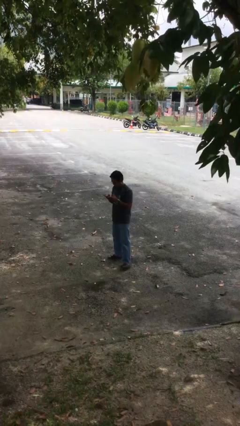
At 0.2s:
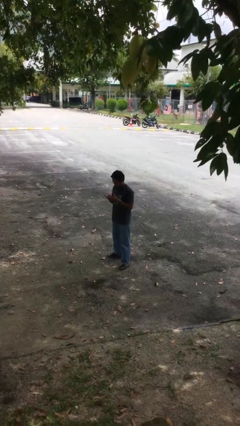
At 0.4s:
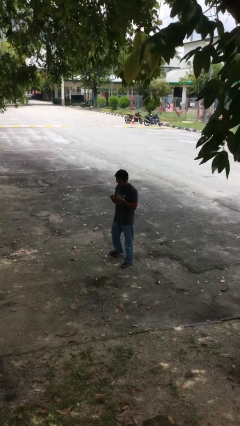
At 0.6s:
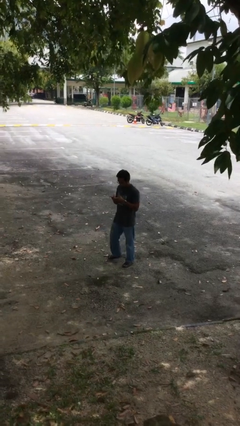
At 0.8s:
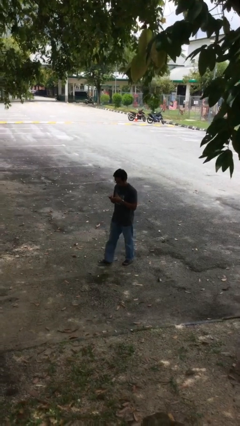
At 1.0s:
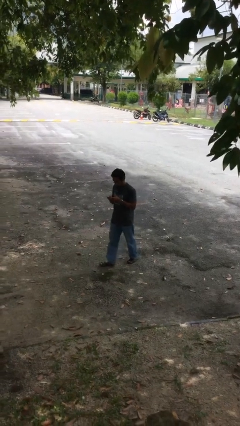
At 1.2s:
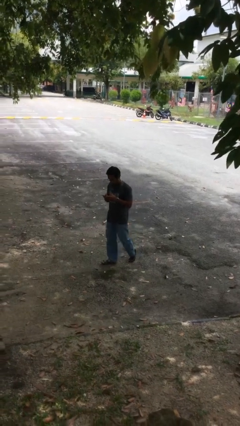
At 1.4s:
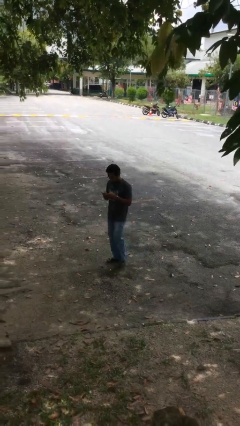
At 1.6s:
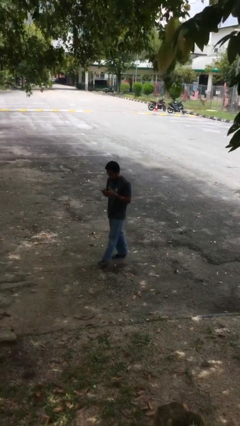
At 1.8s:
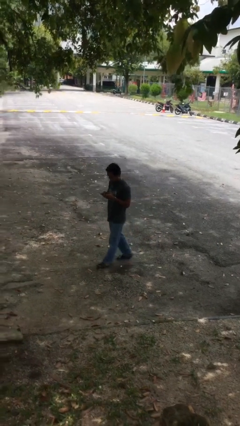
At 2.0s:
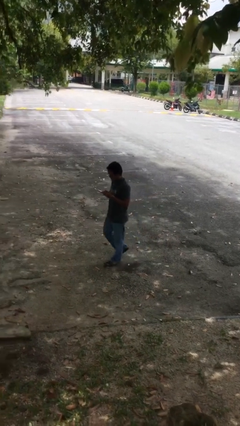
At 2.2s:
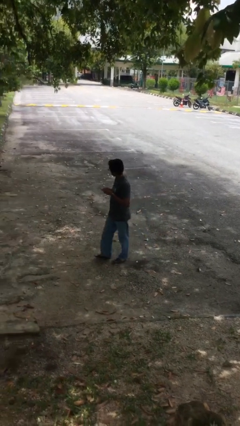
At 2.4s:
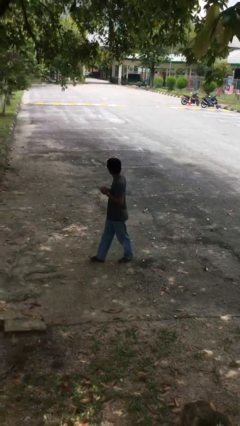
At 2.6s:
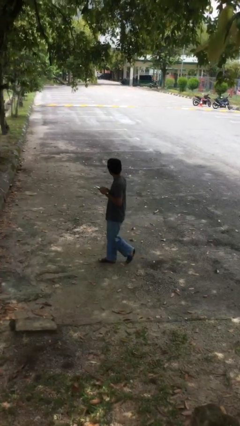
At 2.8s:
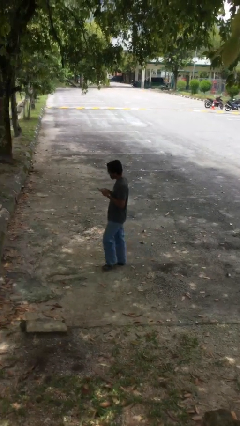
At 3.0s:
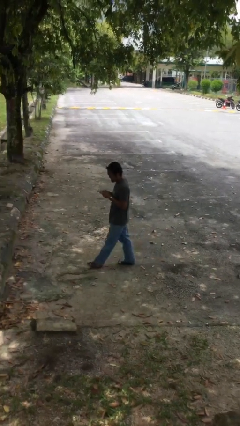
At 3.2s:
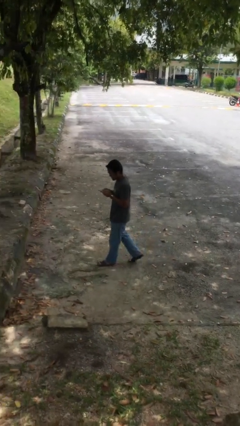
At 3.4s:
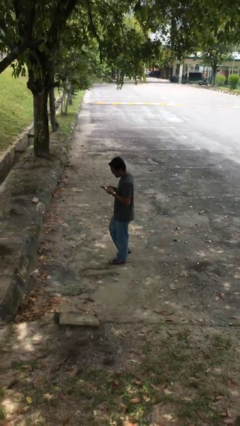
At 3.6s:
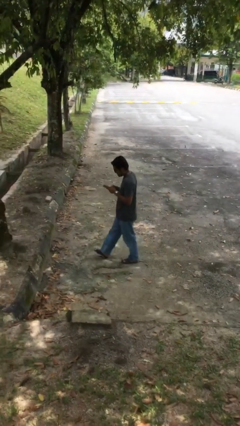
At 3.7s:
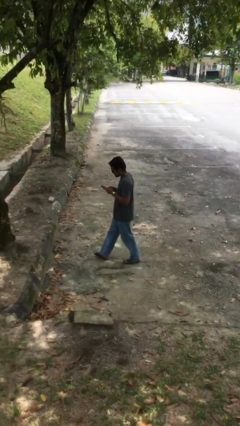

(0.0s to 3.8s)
person texts on phone

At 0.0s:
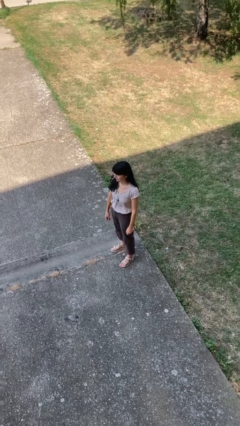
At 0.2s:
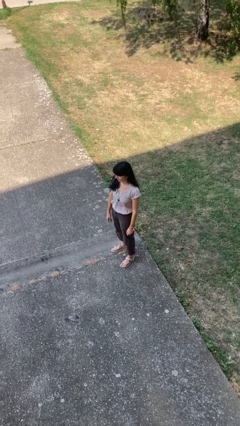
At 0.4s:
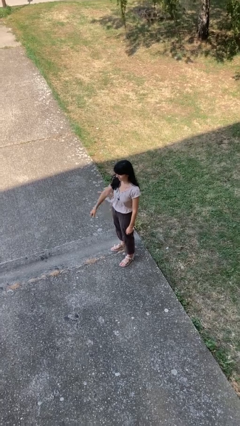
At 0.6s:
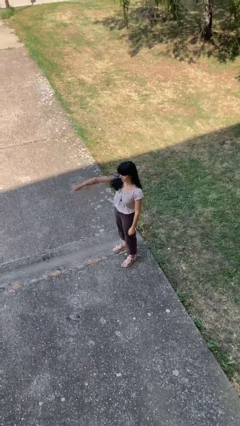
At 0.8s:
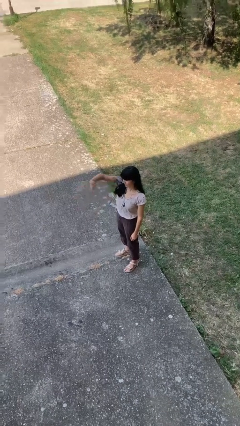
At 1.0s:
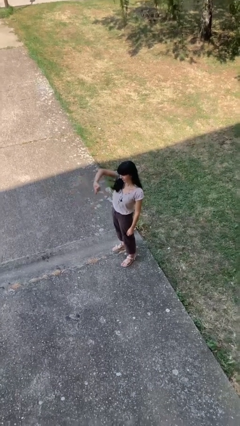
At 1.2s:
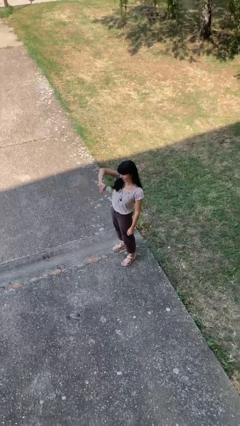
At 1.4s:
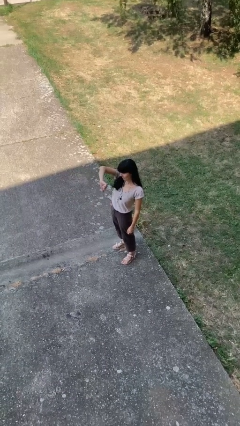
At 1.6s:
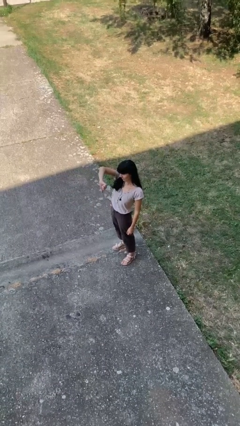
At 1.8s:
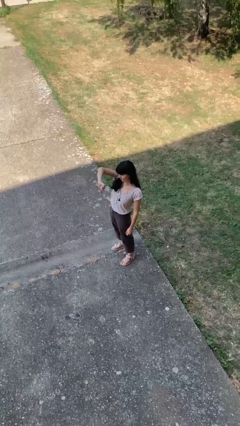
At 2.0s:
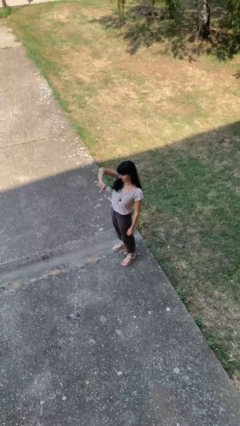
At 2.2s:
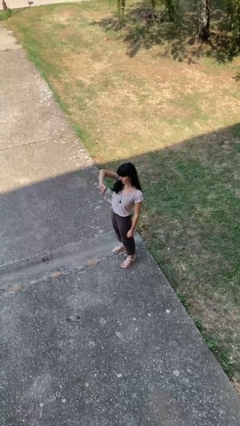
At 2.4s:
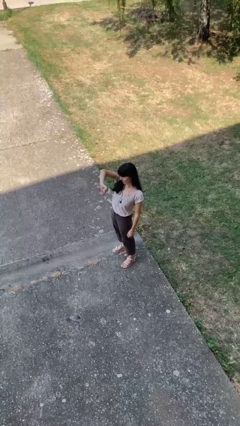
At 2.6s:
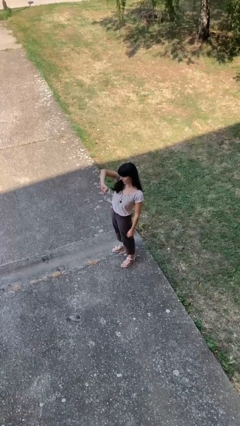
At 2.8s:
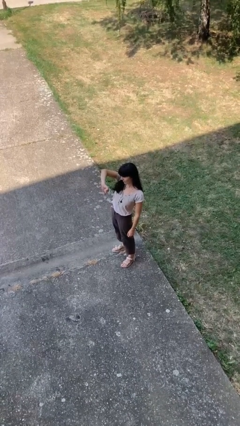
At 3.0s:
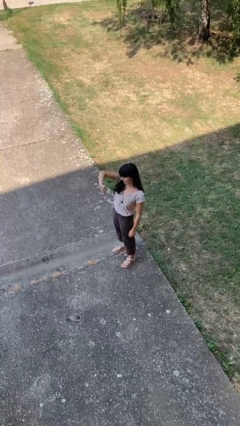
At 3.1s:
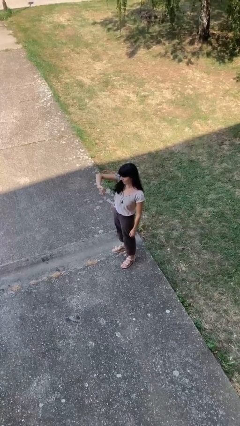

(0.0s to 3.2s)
person gestures thumbs down

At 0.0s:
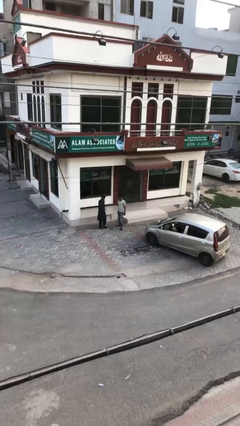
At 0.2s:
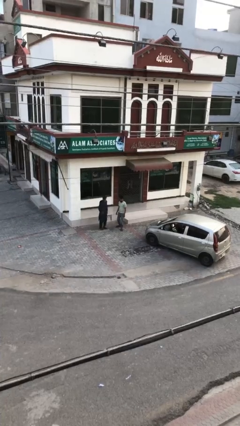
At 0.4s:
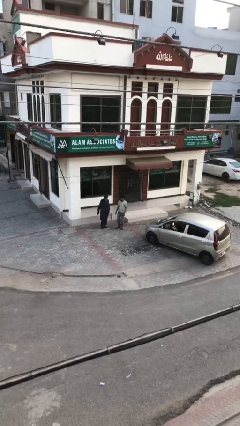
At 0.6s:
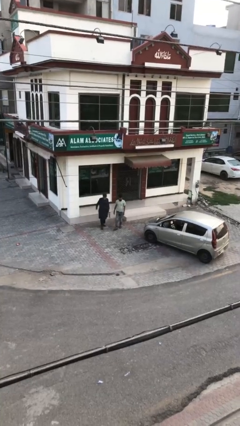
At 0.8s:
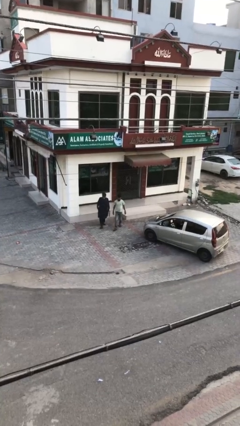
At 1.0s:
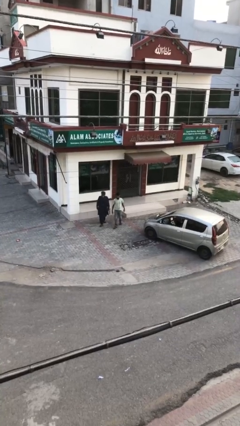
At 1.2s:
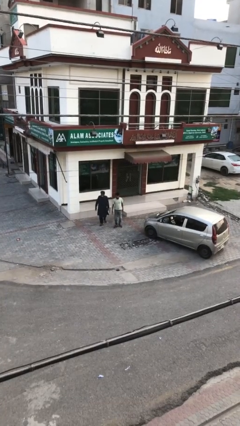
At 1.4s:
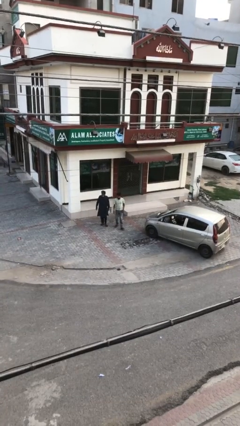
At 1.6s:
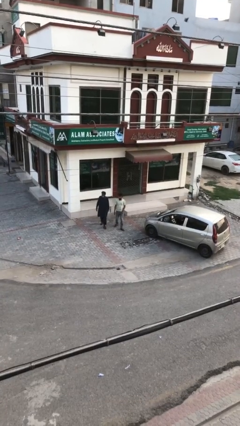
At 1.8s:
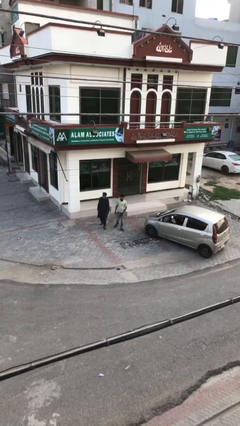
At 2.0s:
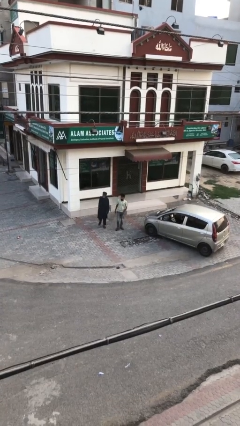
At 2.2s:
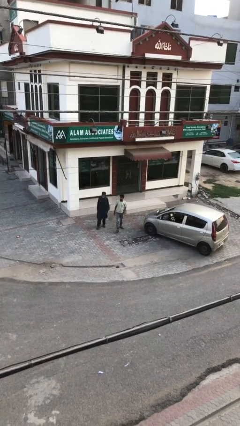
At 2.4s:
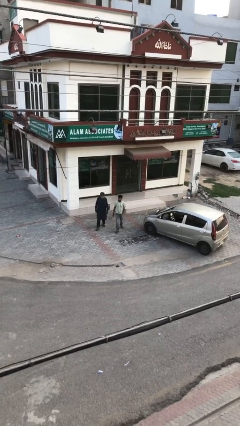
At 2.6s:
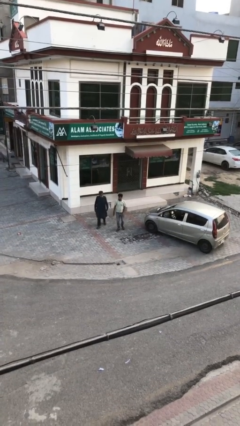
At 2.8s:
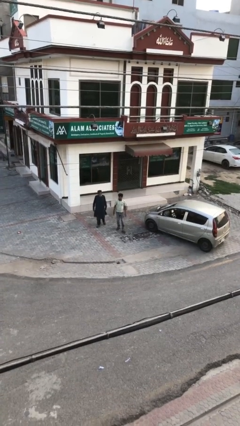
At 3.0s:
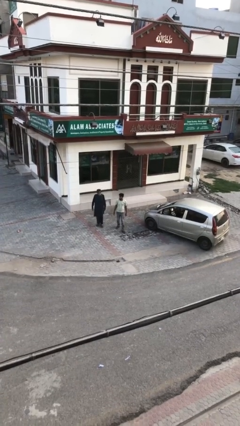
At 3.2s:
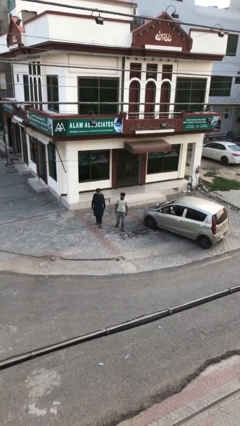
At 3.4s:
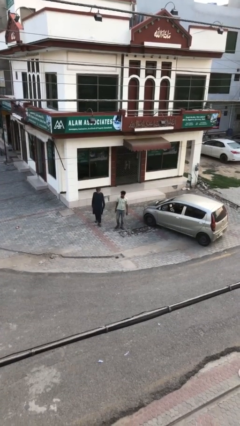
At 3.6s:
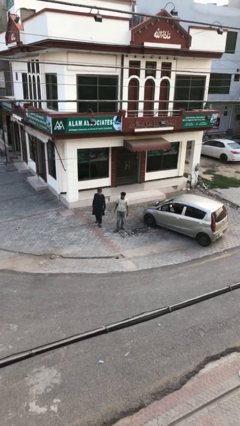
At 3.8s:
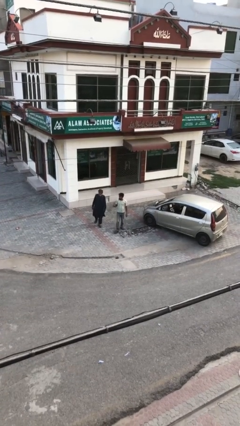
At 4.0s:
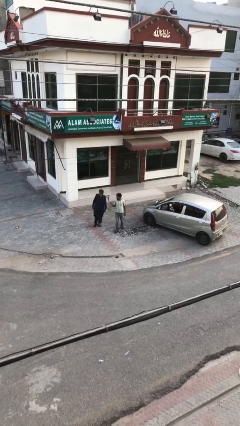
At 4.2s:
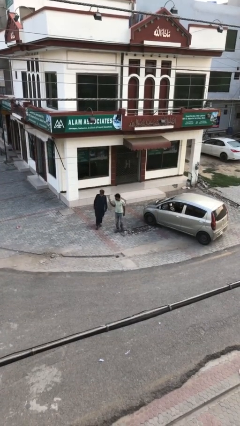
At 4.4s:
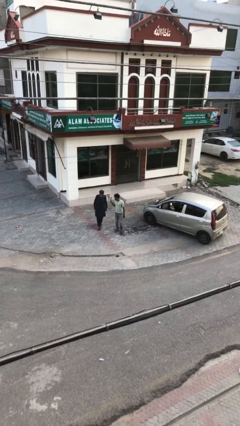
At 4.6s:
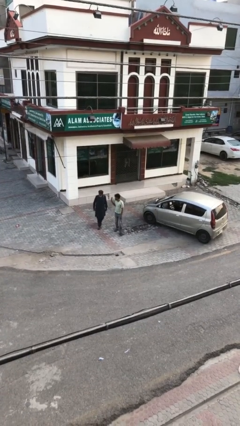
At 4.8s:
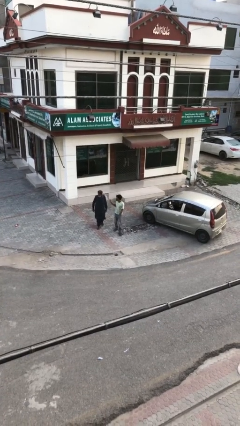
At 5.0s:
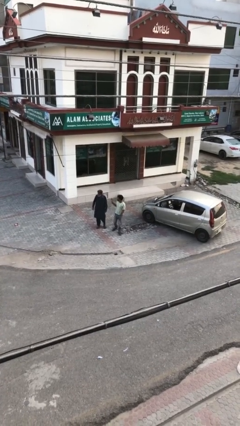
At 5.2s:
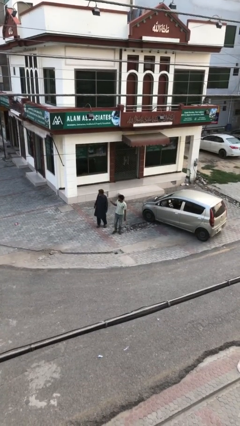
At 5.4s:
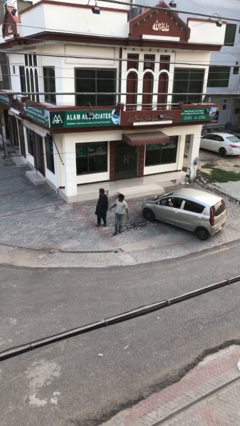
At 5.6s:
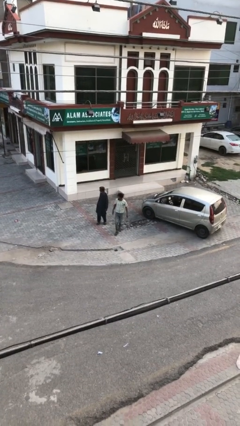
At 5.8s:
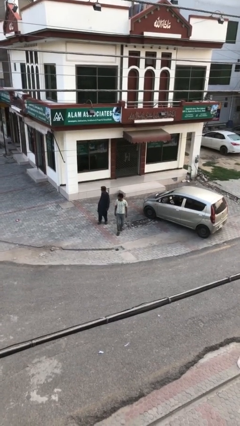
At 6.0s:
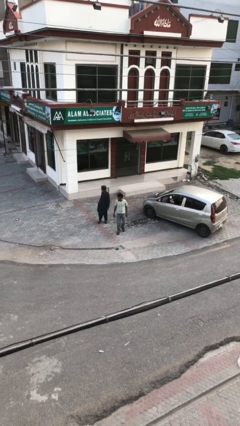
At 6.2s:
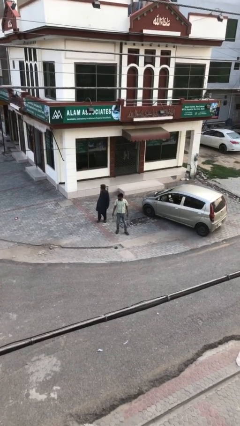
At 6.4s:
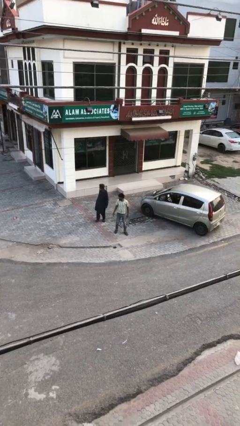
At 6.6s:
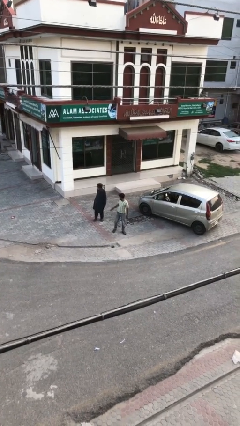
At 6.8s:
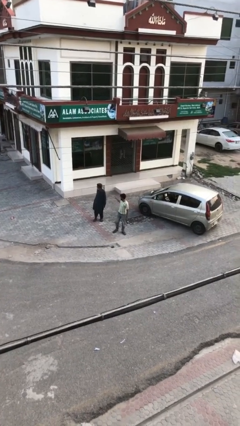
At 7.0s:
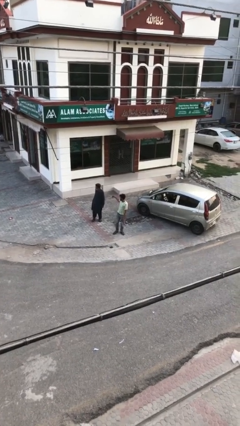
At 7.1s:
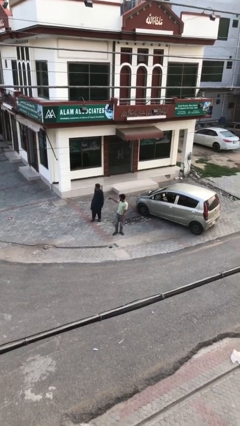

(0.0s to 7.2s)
person talks to person

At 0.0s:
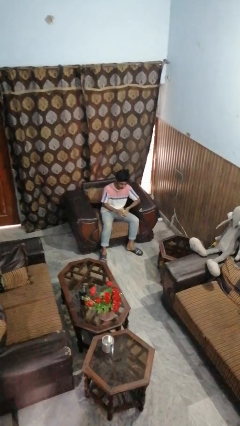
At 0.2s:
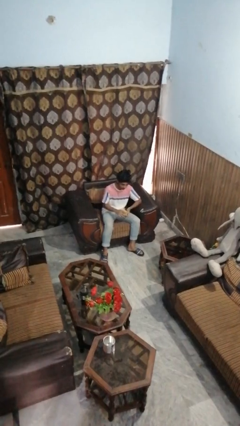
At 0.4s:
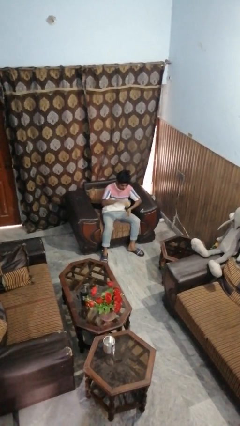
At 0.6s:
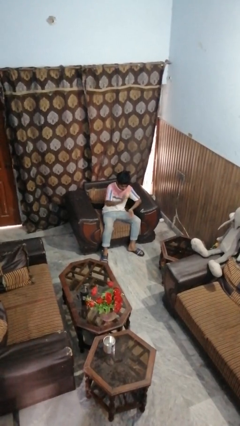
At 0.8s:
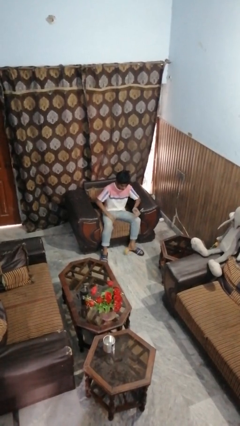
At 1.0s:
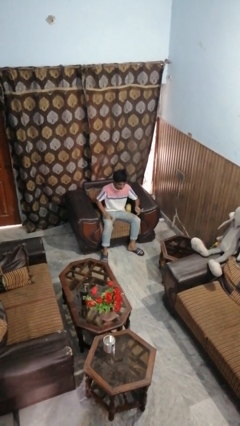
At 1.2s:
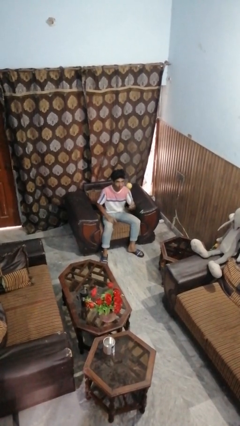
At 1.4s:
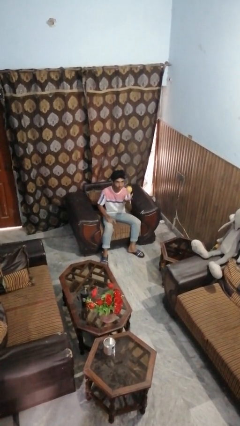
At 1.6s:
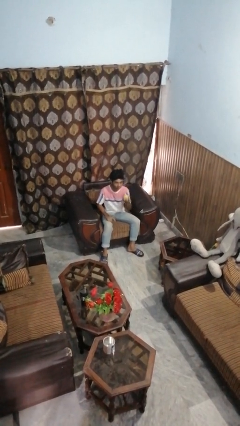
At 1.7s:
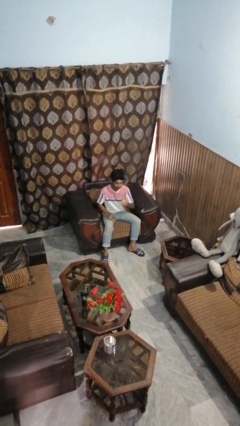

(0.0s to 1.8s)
person bounces ball on floor

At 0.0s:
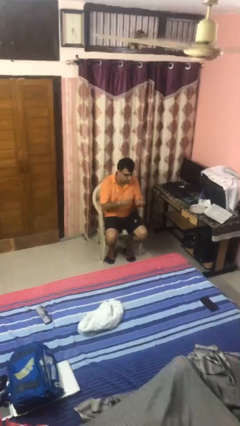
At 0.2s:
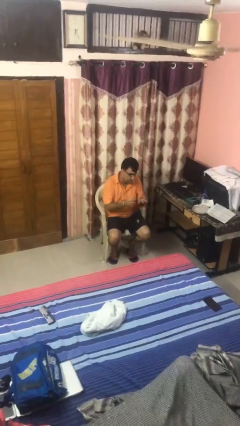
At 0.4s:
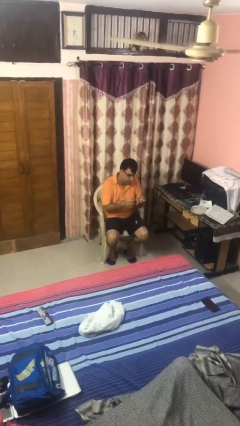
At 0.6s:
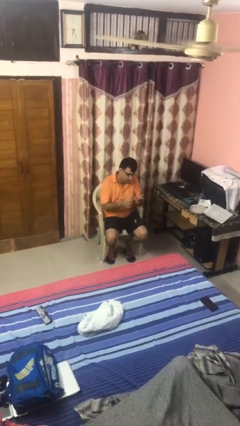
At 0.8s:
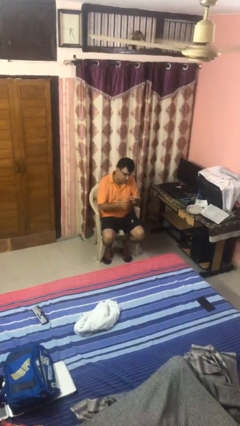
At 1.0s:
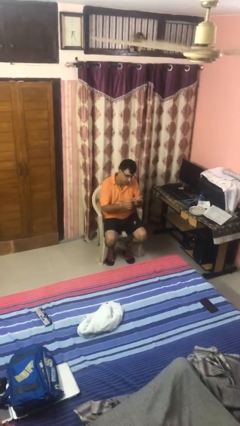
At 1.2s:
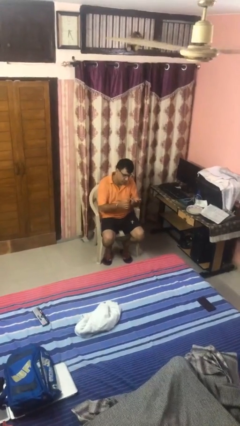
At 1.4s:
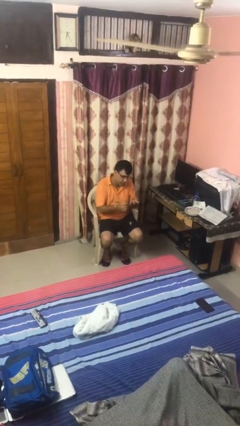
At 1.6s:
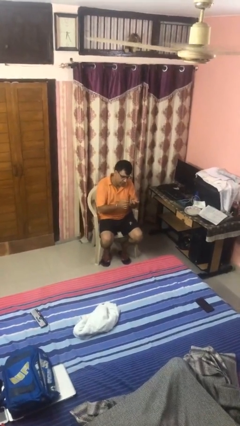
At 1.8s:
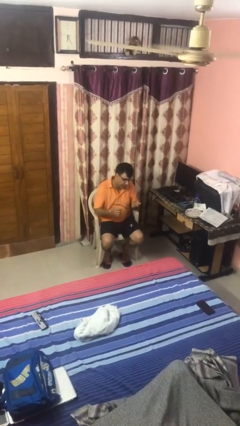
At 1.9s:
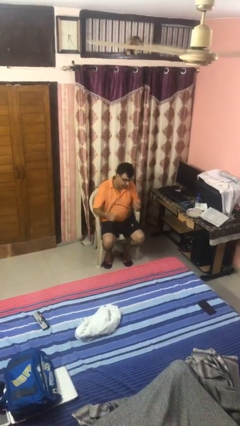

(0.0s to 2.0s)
person files fingernails
